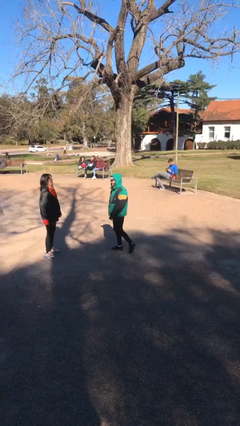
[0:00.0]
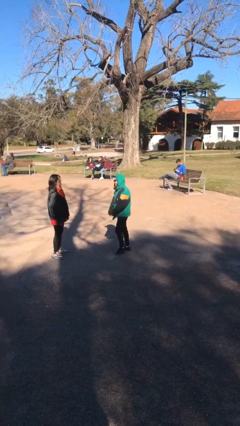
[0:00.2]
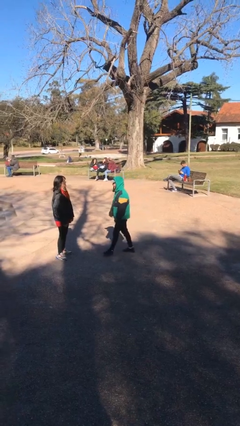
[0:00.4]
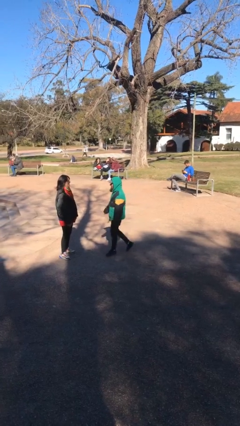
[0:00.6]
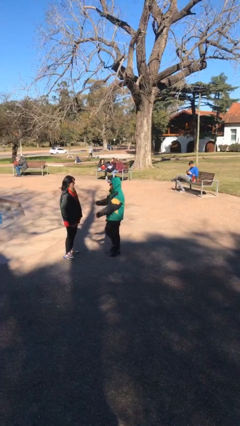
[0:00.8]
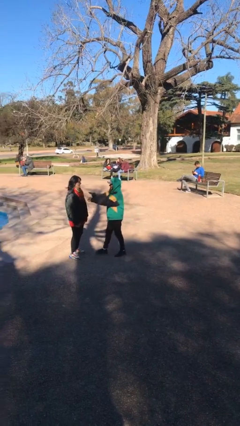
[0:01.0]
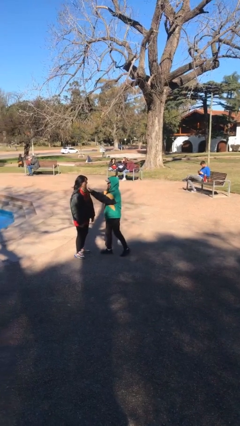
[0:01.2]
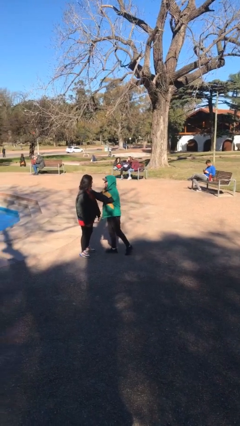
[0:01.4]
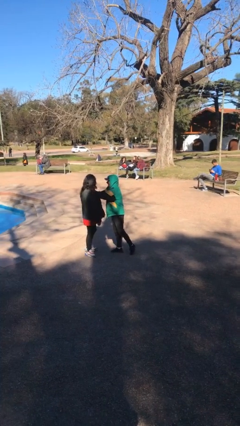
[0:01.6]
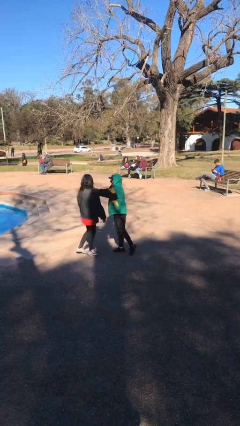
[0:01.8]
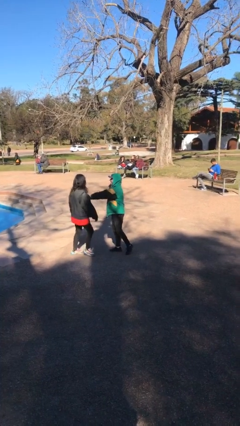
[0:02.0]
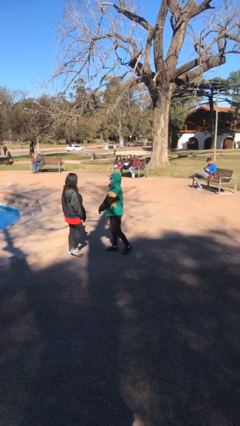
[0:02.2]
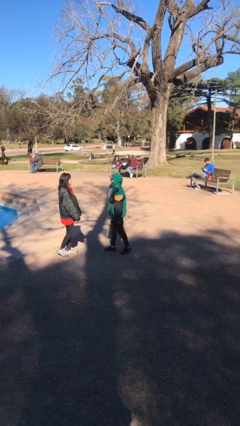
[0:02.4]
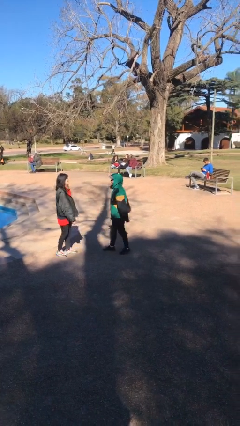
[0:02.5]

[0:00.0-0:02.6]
person shoves person

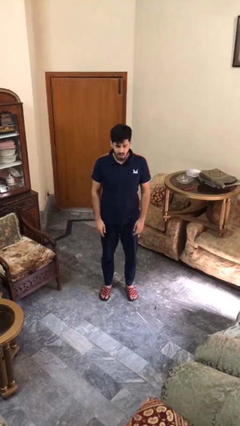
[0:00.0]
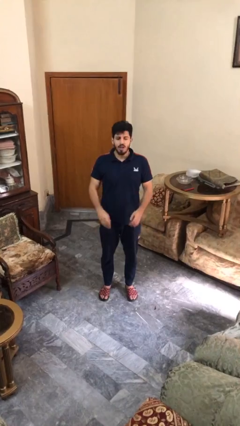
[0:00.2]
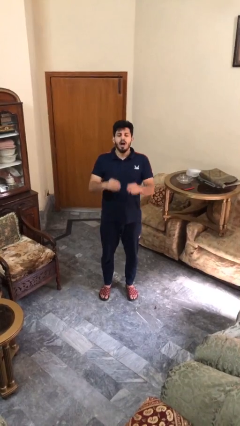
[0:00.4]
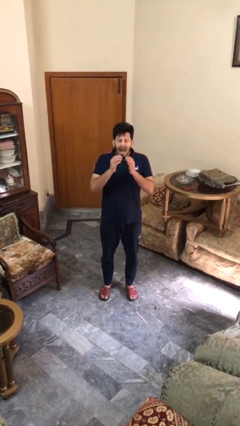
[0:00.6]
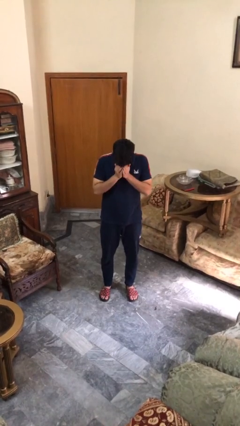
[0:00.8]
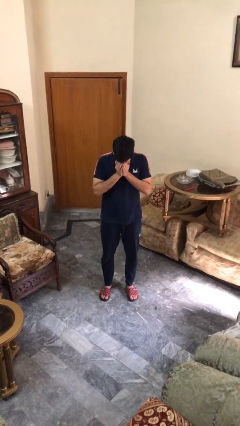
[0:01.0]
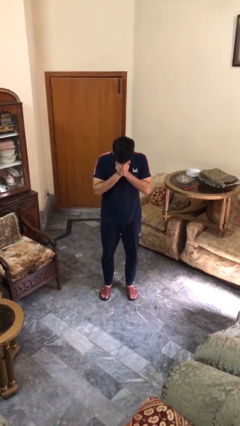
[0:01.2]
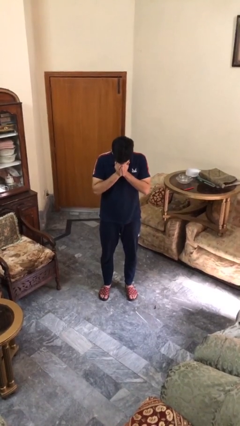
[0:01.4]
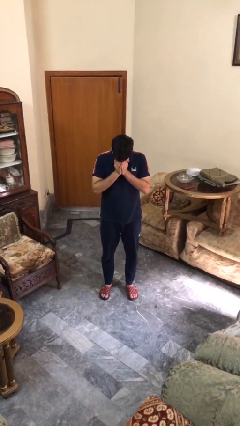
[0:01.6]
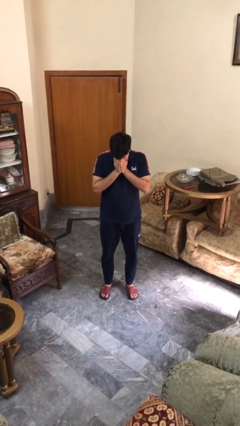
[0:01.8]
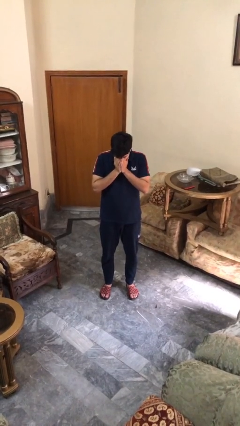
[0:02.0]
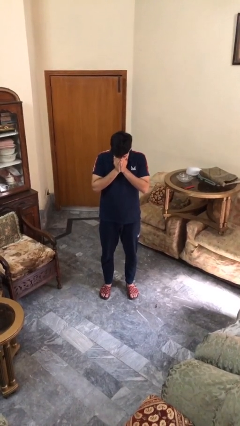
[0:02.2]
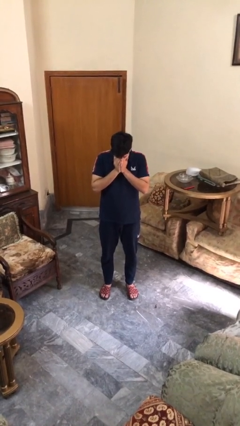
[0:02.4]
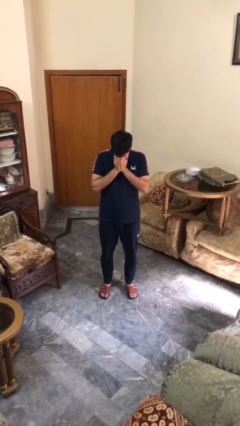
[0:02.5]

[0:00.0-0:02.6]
person sneezes into hand

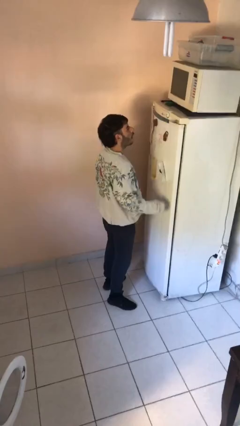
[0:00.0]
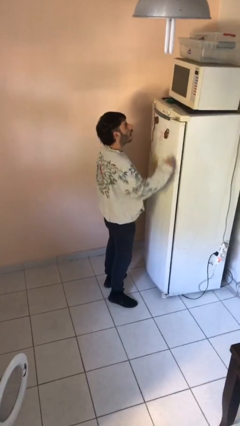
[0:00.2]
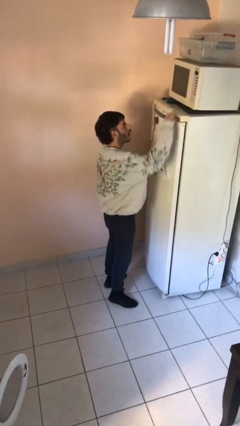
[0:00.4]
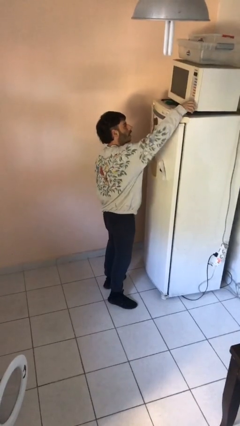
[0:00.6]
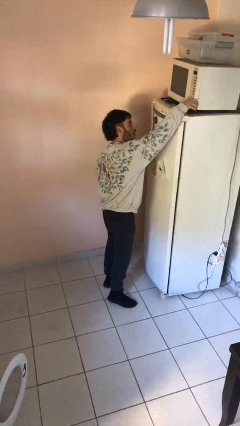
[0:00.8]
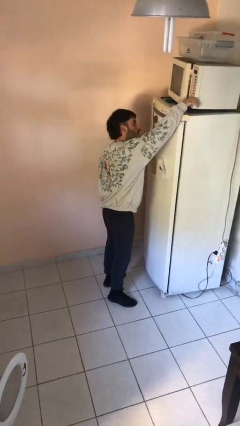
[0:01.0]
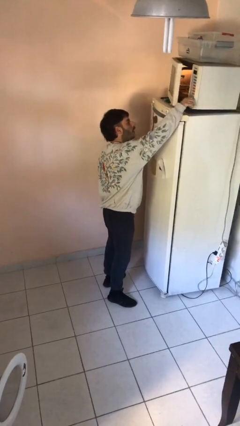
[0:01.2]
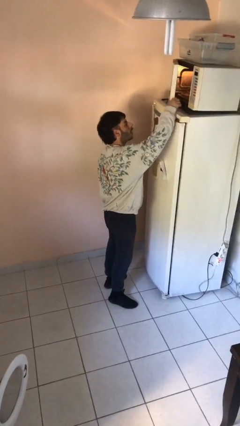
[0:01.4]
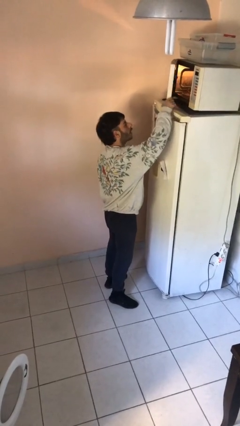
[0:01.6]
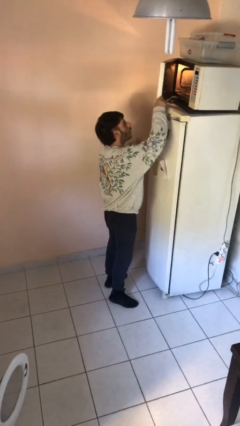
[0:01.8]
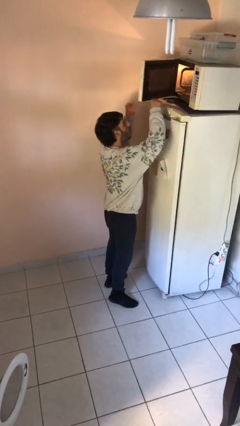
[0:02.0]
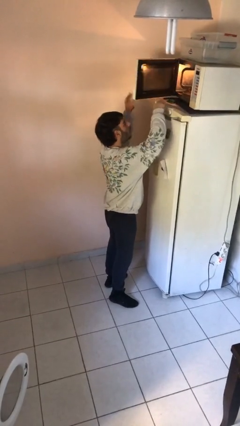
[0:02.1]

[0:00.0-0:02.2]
person opens microwave

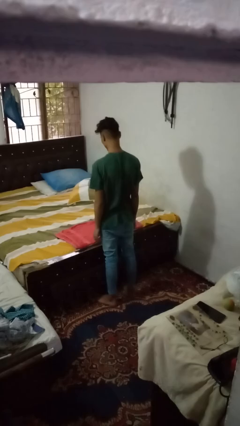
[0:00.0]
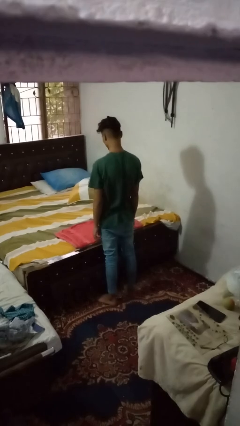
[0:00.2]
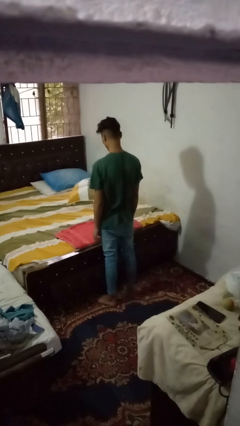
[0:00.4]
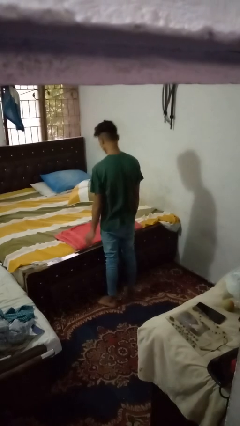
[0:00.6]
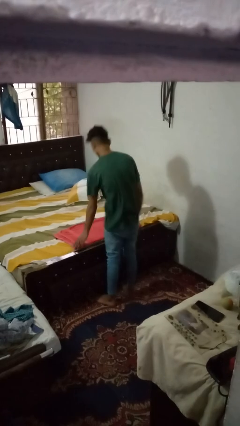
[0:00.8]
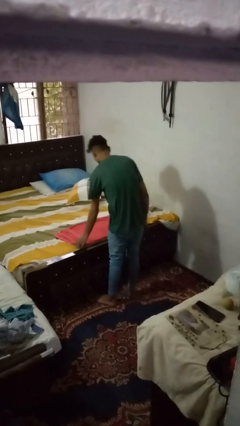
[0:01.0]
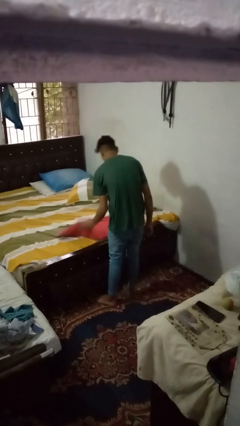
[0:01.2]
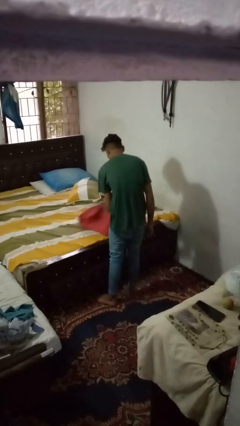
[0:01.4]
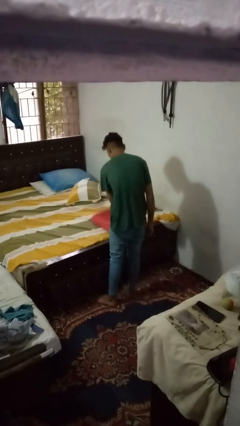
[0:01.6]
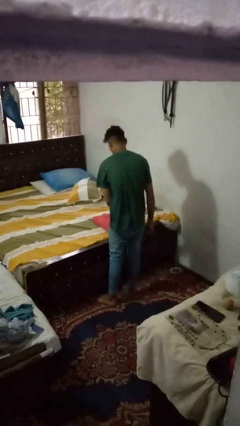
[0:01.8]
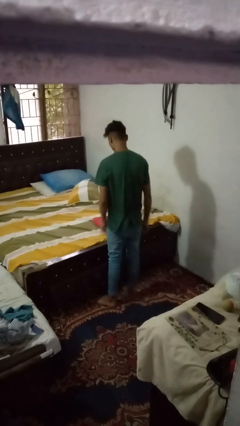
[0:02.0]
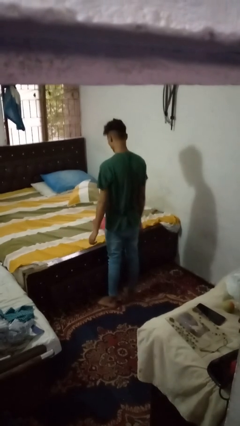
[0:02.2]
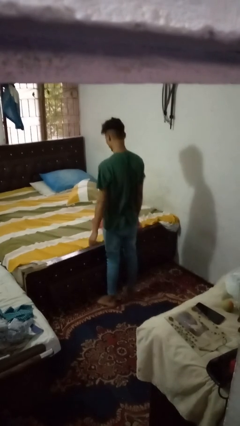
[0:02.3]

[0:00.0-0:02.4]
person folds towel

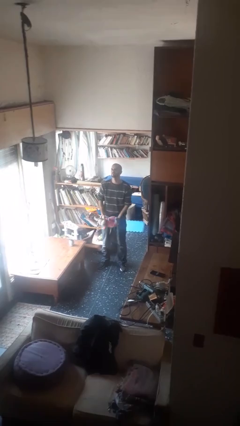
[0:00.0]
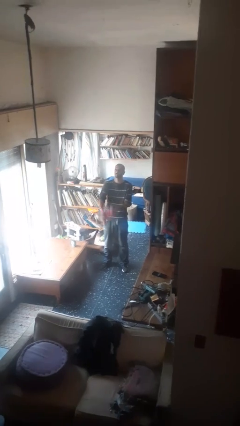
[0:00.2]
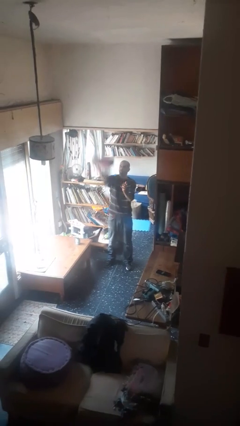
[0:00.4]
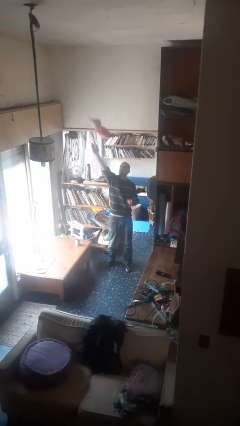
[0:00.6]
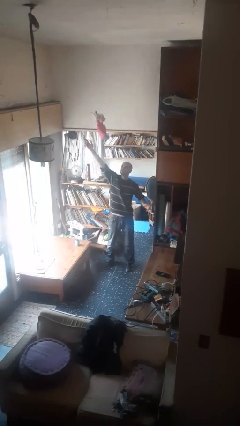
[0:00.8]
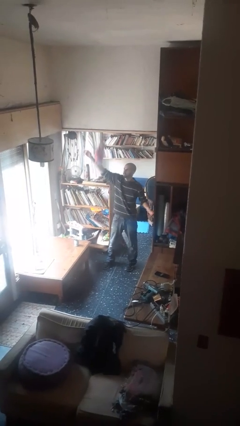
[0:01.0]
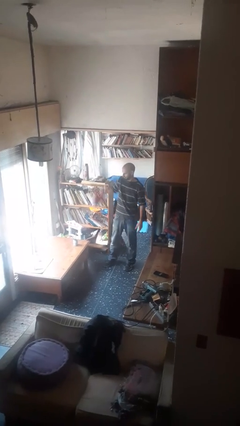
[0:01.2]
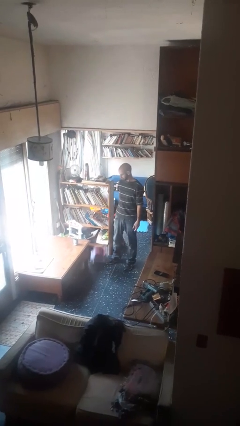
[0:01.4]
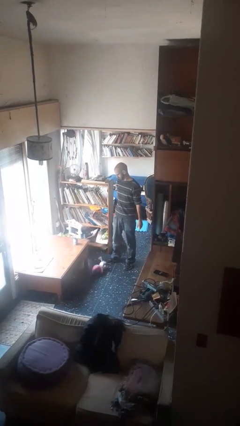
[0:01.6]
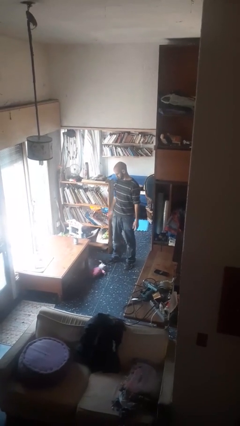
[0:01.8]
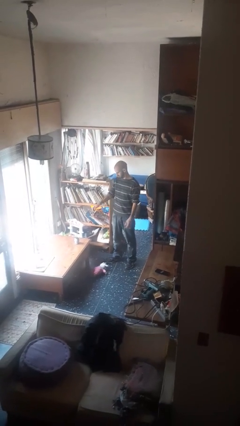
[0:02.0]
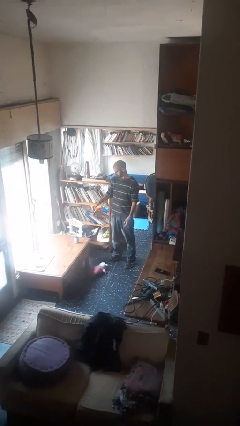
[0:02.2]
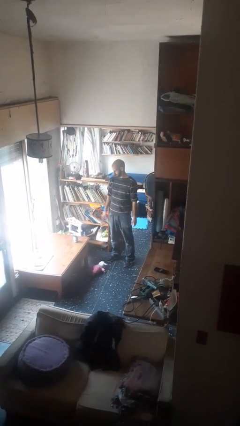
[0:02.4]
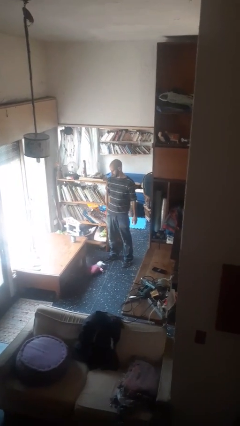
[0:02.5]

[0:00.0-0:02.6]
person throws object into air

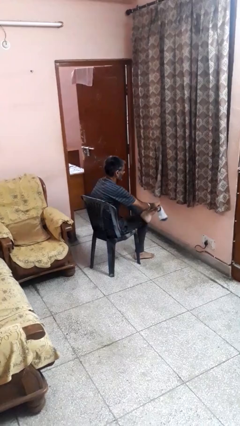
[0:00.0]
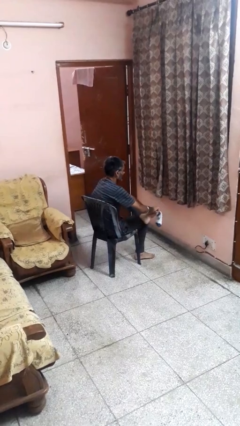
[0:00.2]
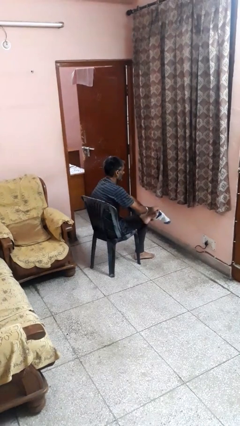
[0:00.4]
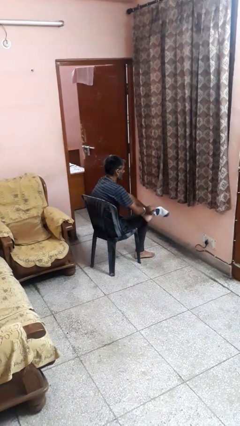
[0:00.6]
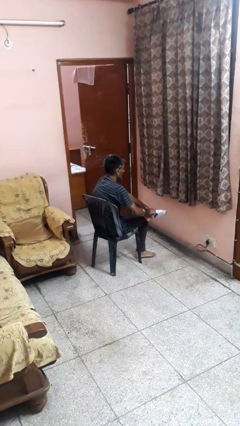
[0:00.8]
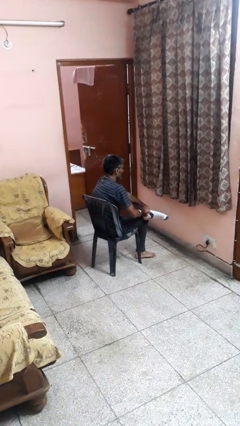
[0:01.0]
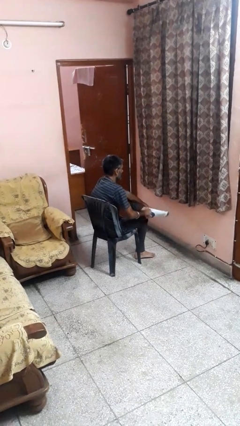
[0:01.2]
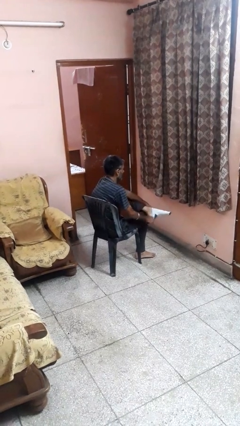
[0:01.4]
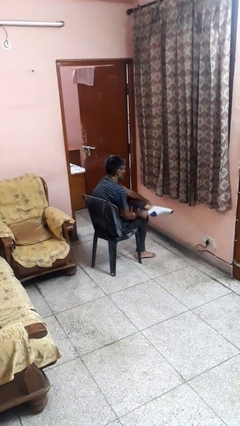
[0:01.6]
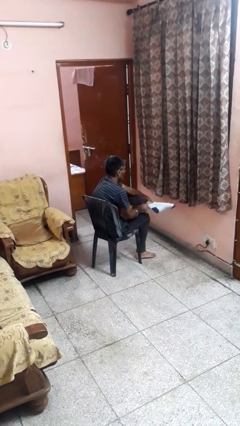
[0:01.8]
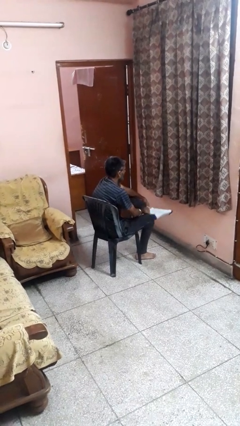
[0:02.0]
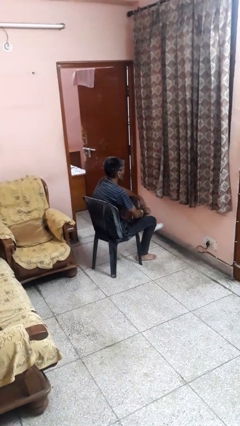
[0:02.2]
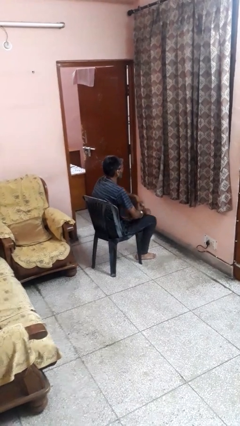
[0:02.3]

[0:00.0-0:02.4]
person puts on socks

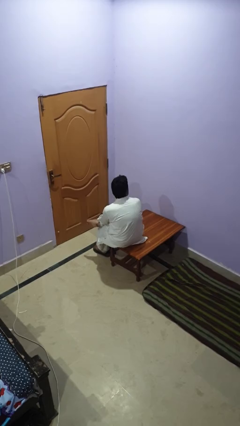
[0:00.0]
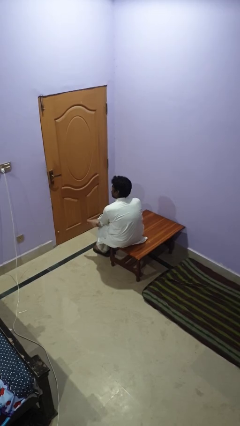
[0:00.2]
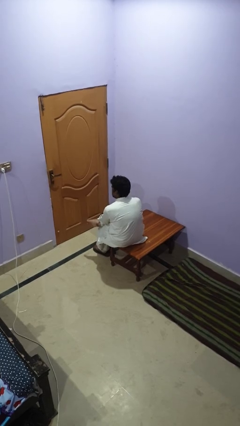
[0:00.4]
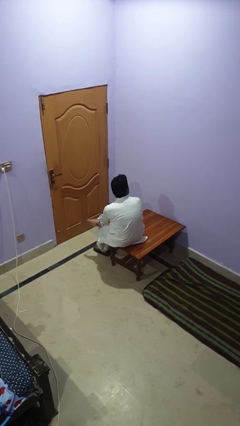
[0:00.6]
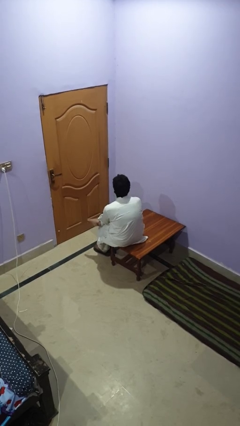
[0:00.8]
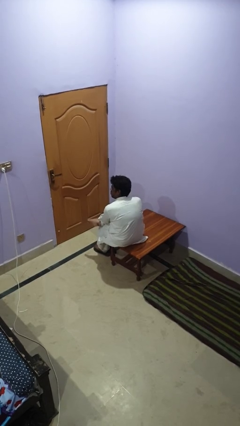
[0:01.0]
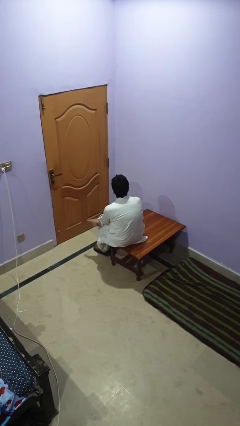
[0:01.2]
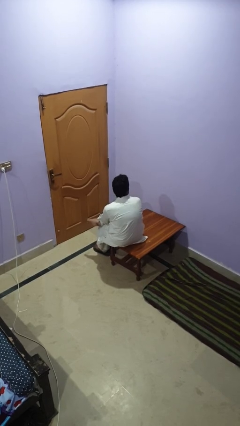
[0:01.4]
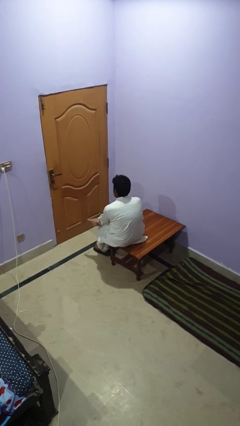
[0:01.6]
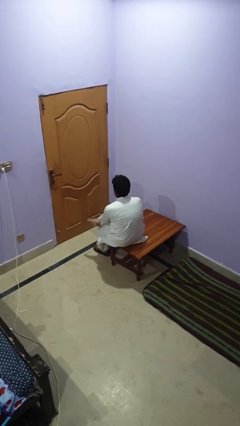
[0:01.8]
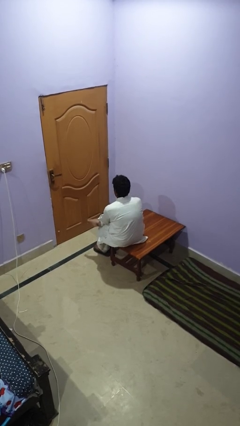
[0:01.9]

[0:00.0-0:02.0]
person shakes head
